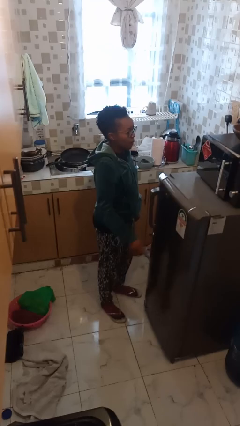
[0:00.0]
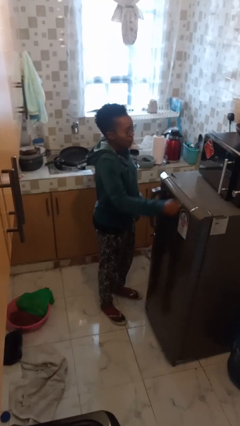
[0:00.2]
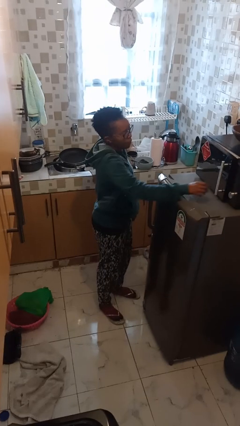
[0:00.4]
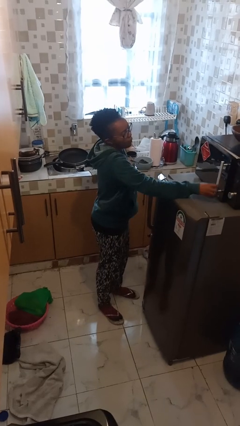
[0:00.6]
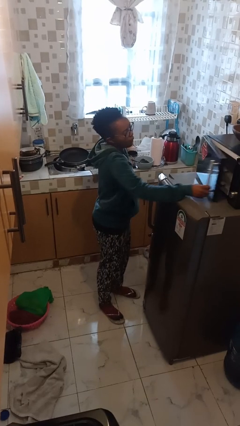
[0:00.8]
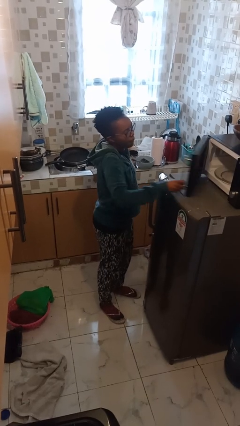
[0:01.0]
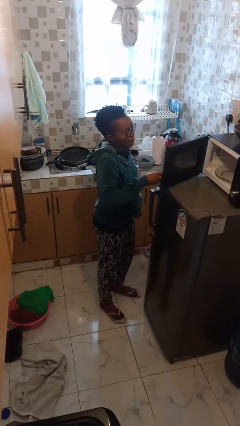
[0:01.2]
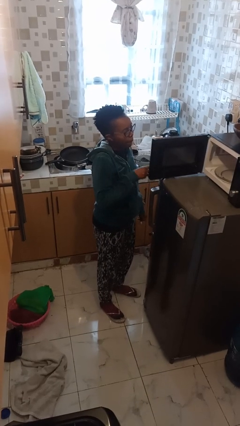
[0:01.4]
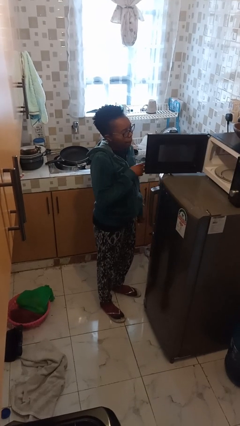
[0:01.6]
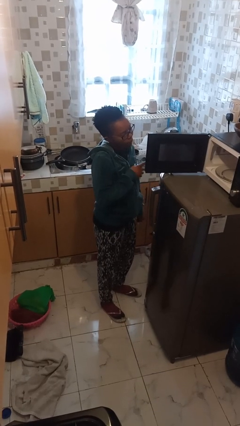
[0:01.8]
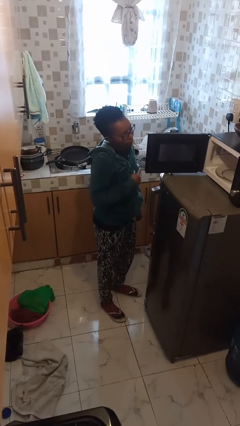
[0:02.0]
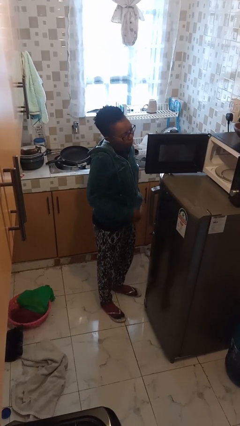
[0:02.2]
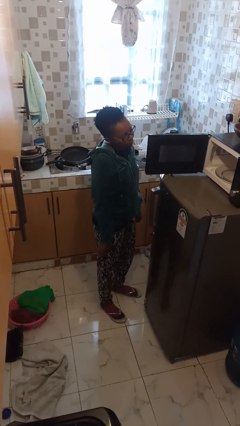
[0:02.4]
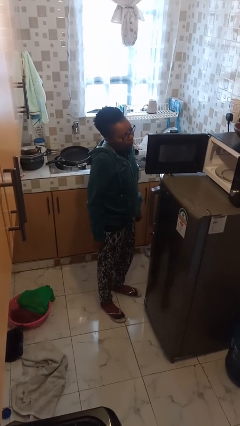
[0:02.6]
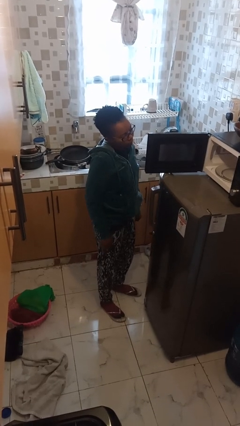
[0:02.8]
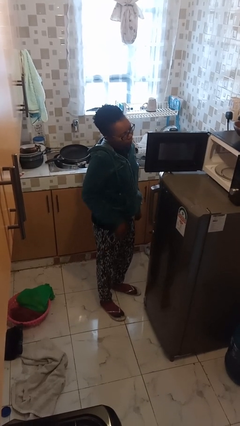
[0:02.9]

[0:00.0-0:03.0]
person opens microwave

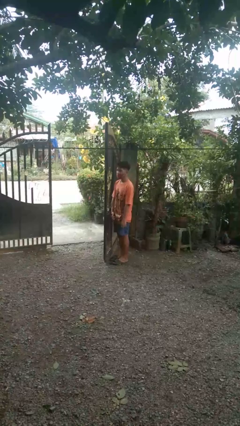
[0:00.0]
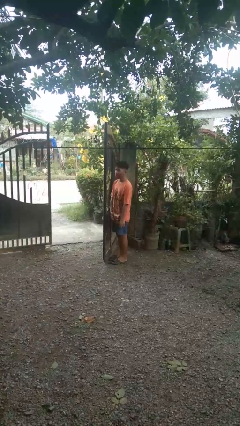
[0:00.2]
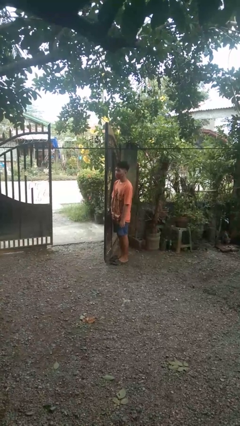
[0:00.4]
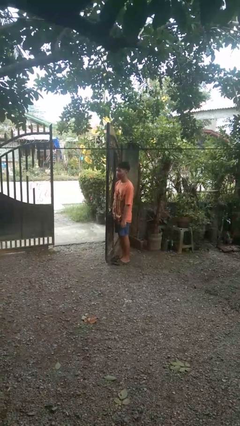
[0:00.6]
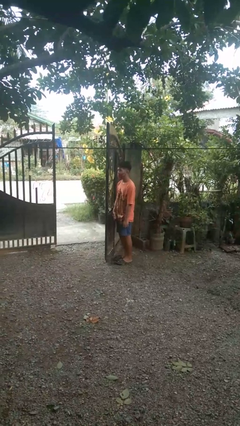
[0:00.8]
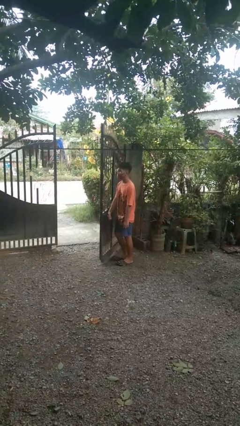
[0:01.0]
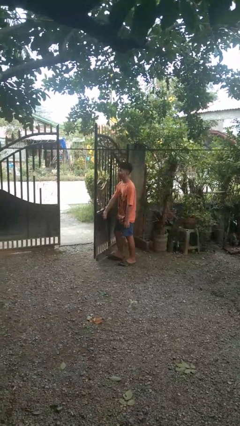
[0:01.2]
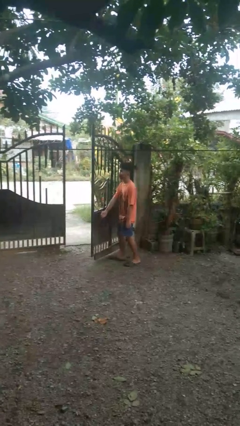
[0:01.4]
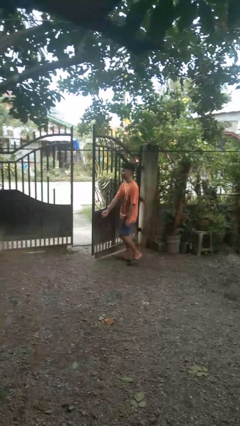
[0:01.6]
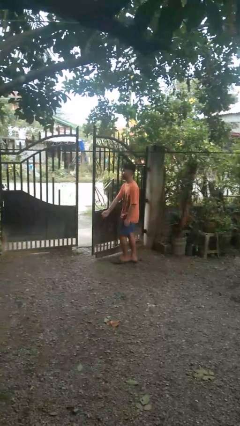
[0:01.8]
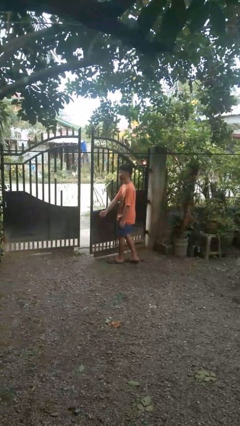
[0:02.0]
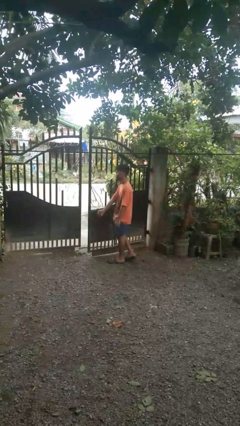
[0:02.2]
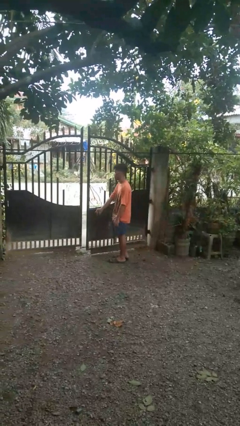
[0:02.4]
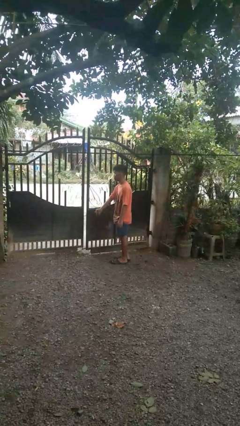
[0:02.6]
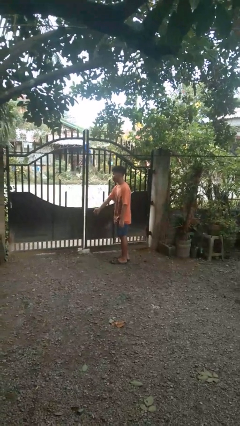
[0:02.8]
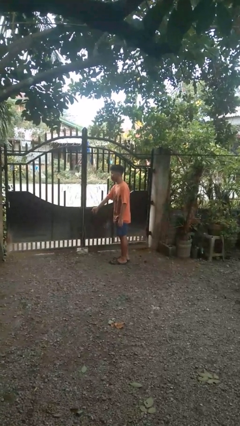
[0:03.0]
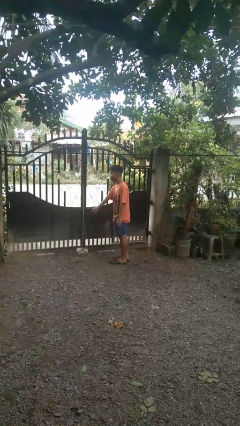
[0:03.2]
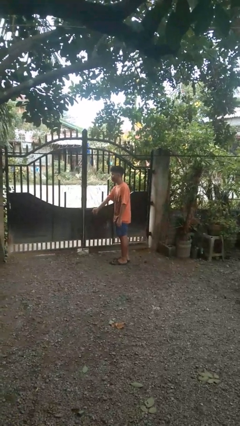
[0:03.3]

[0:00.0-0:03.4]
person closes gate

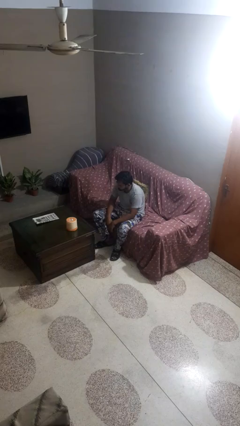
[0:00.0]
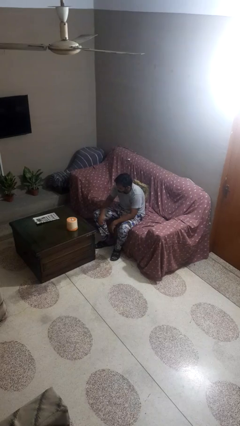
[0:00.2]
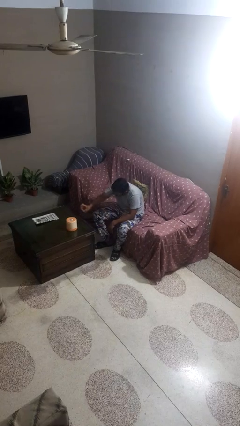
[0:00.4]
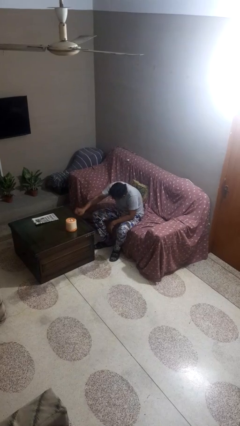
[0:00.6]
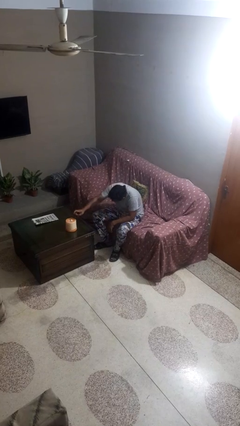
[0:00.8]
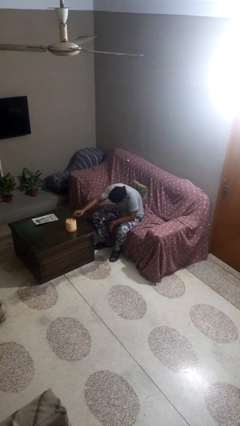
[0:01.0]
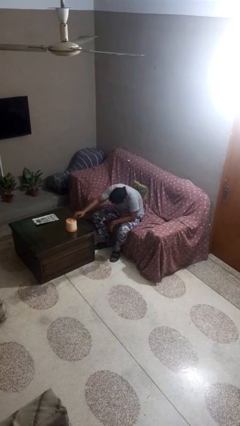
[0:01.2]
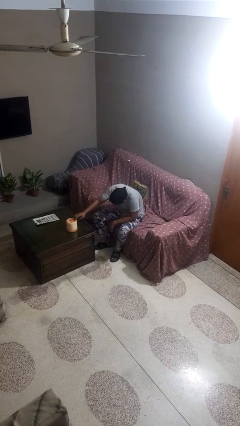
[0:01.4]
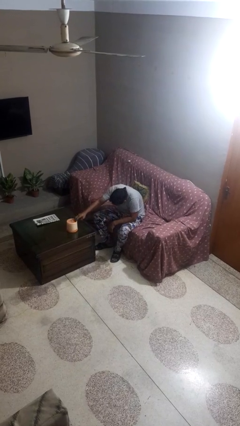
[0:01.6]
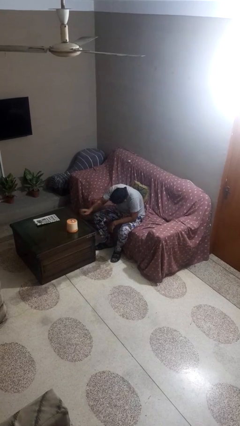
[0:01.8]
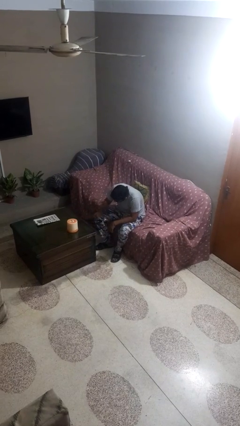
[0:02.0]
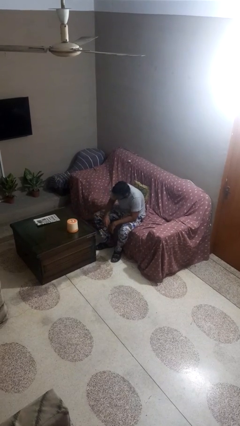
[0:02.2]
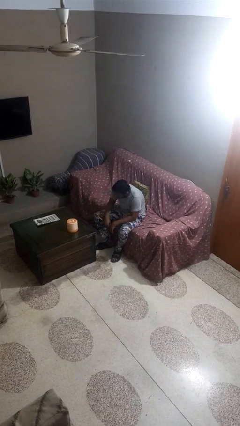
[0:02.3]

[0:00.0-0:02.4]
person taps object with finger

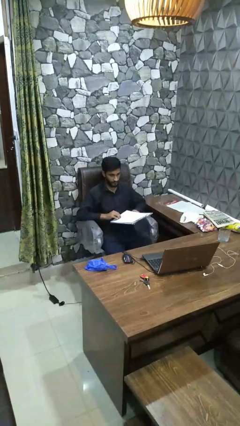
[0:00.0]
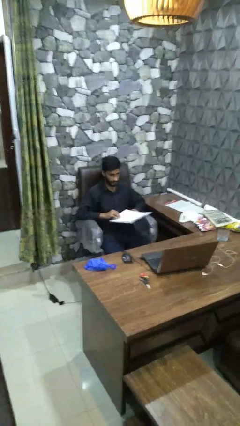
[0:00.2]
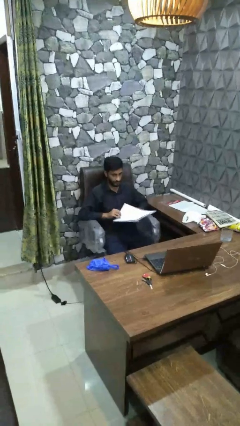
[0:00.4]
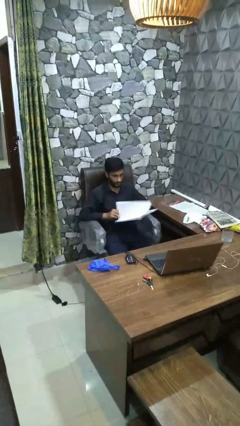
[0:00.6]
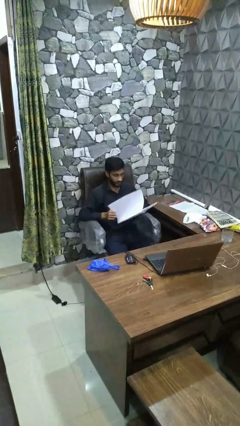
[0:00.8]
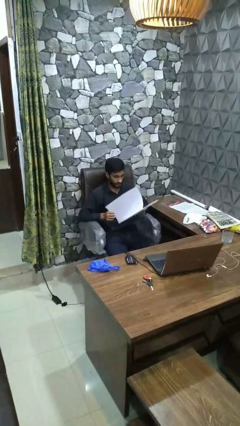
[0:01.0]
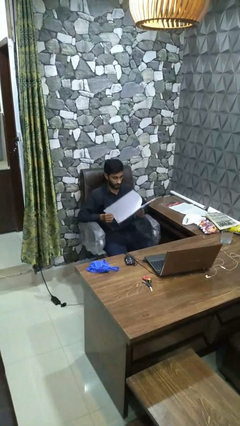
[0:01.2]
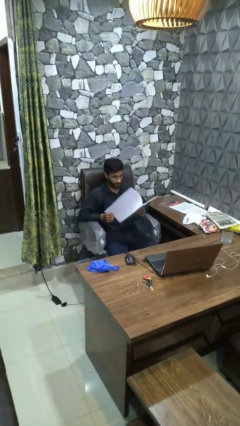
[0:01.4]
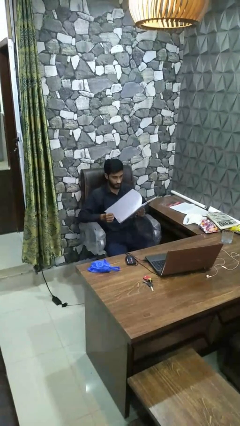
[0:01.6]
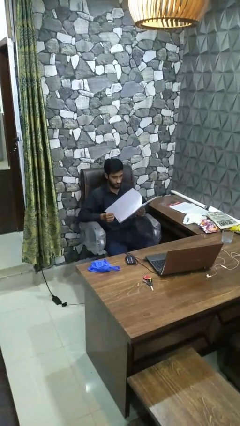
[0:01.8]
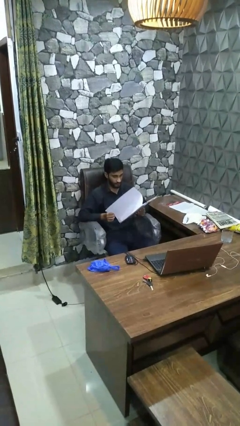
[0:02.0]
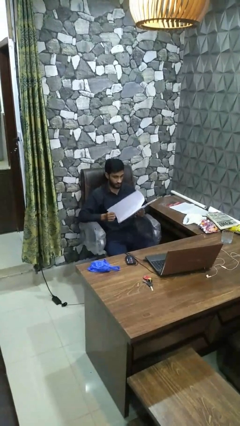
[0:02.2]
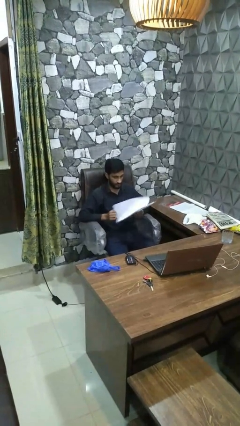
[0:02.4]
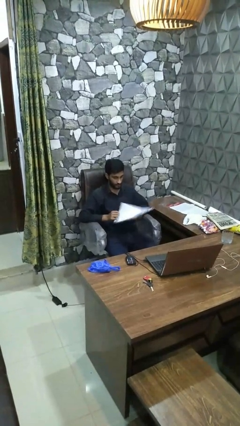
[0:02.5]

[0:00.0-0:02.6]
person reads book

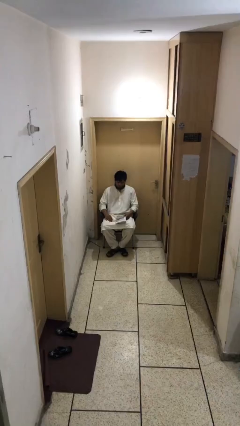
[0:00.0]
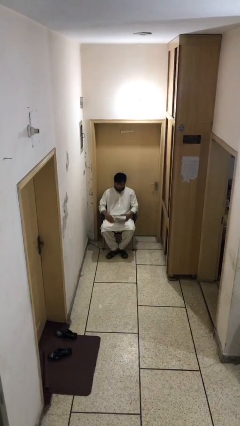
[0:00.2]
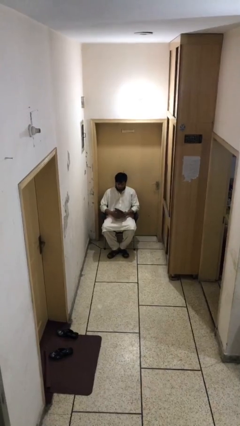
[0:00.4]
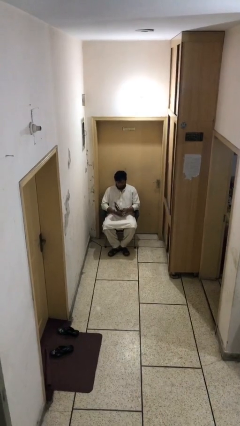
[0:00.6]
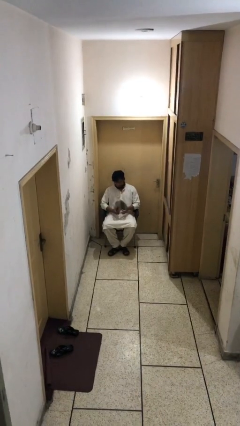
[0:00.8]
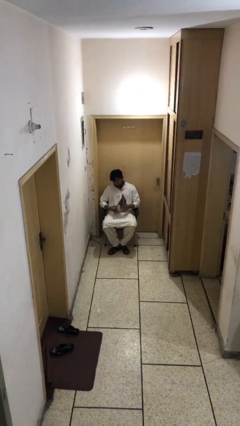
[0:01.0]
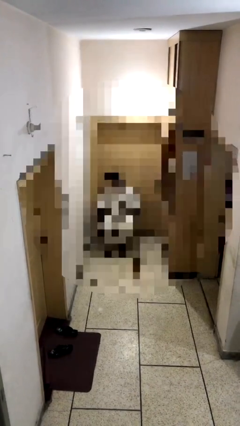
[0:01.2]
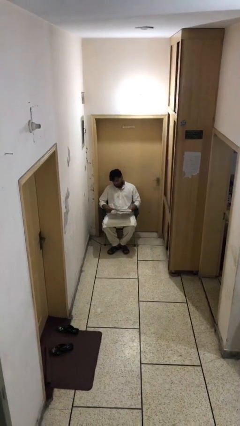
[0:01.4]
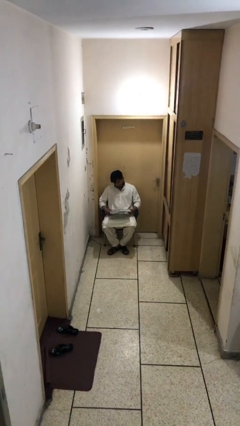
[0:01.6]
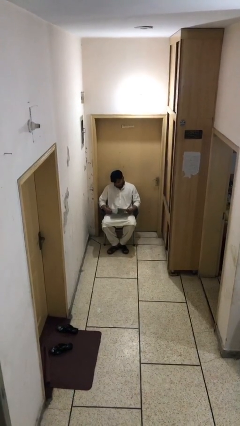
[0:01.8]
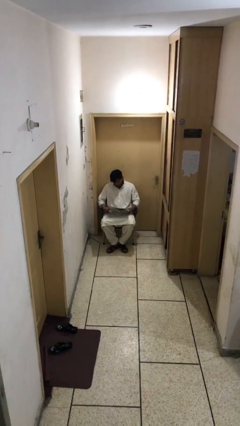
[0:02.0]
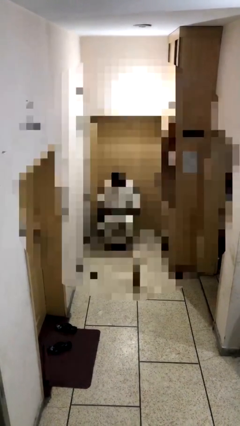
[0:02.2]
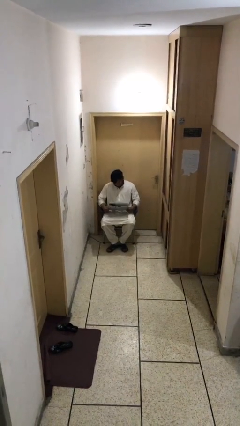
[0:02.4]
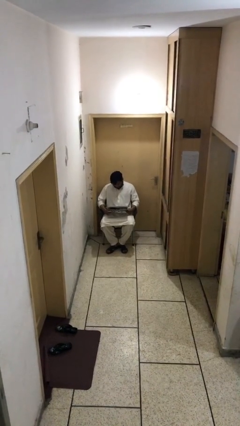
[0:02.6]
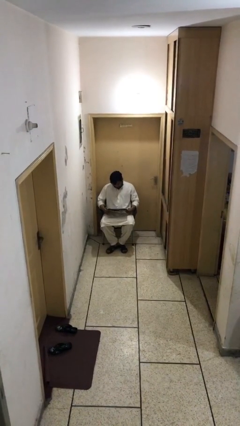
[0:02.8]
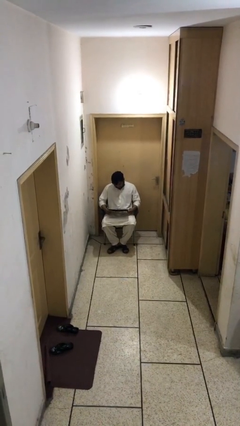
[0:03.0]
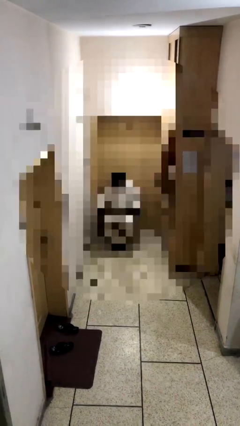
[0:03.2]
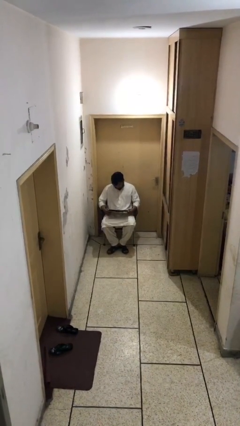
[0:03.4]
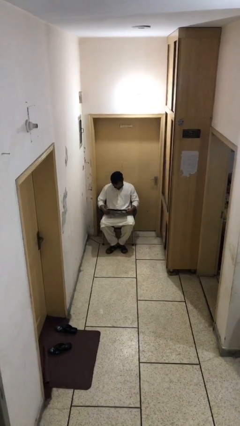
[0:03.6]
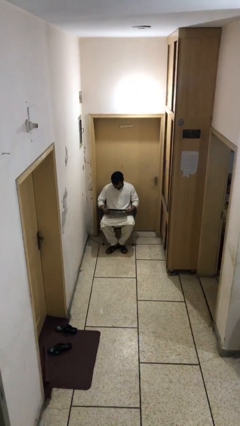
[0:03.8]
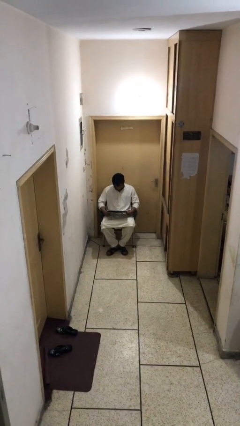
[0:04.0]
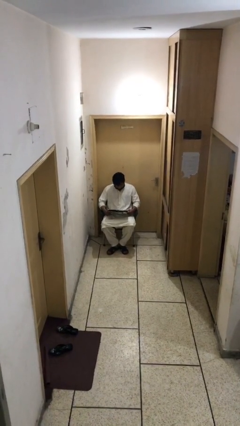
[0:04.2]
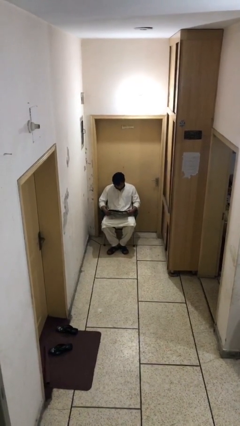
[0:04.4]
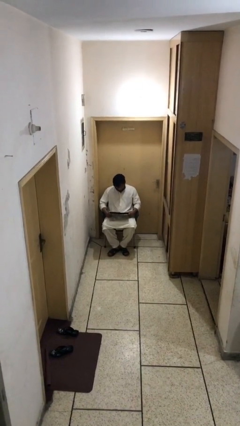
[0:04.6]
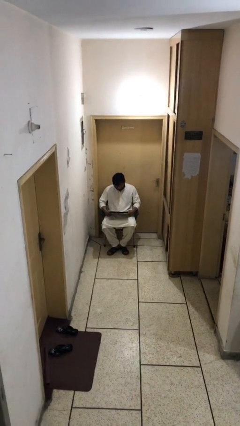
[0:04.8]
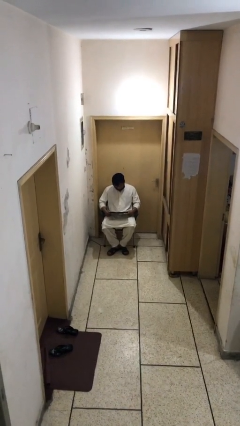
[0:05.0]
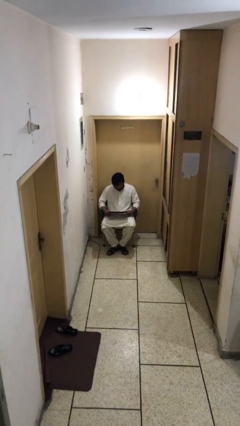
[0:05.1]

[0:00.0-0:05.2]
person reads document

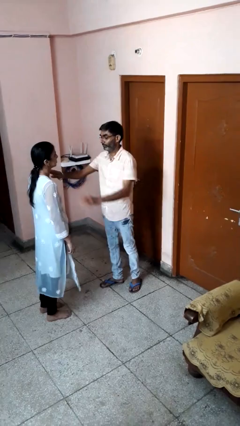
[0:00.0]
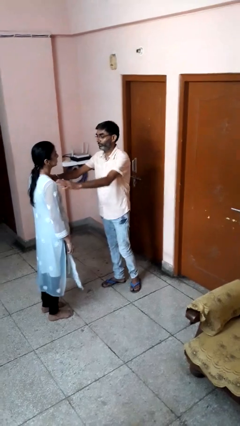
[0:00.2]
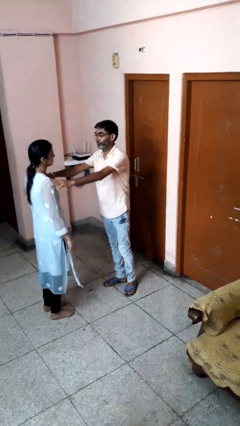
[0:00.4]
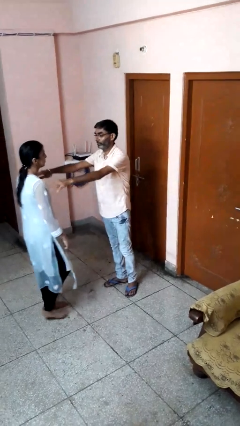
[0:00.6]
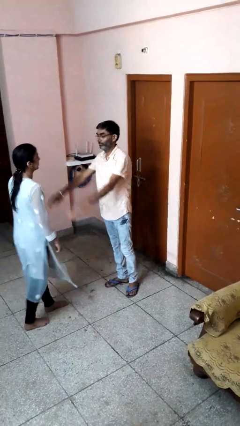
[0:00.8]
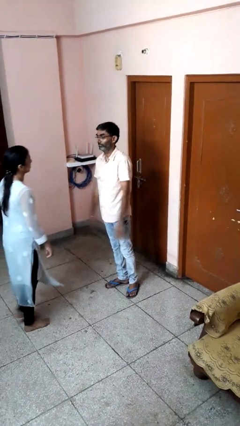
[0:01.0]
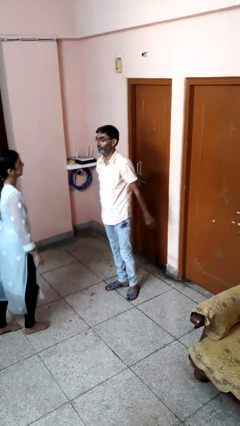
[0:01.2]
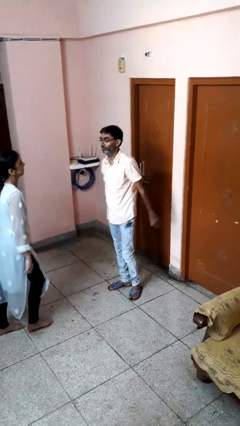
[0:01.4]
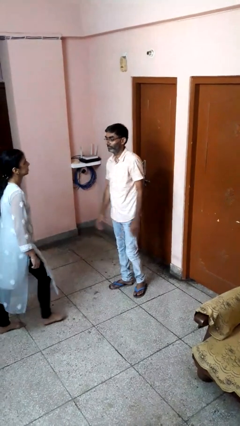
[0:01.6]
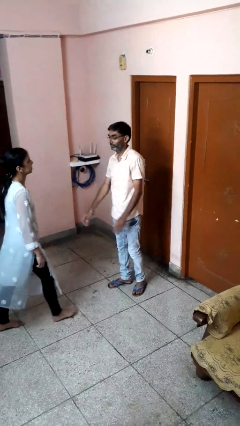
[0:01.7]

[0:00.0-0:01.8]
person shoves person
